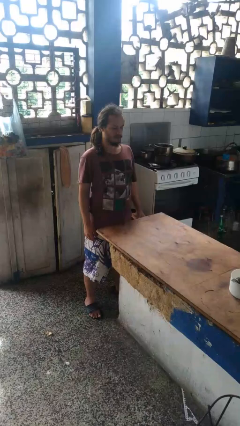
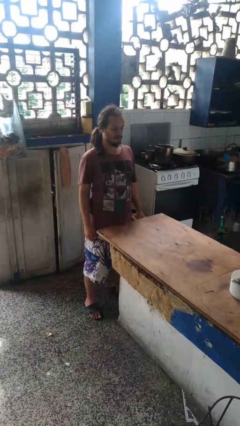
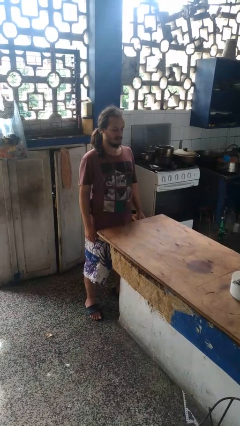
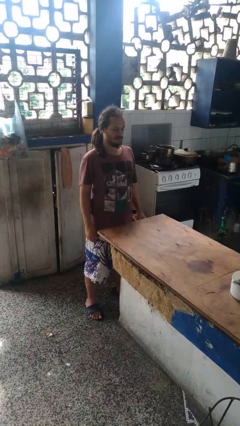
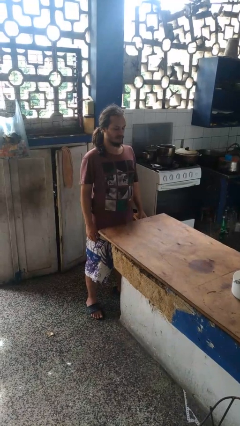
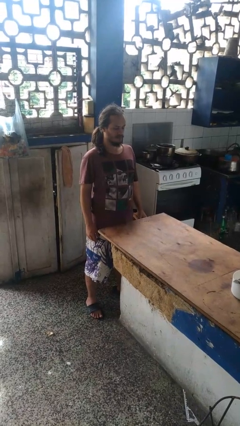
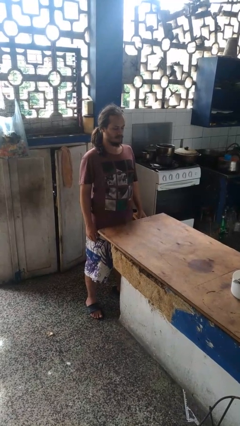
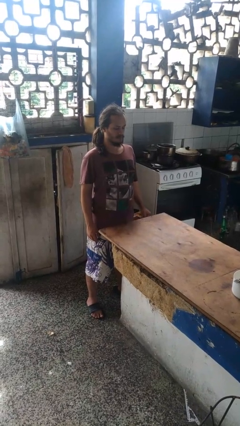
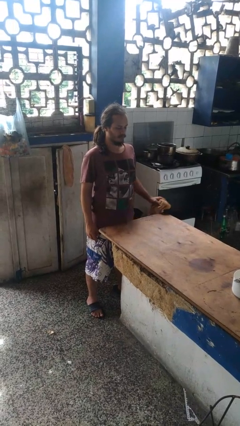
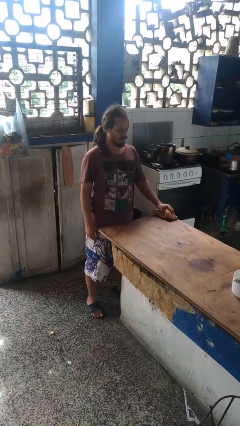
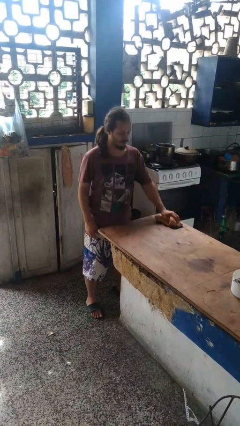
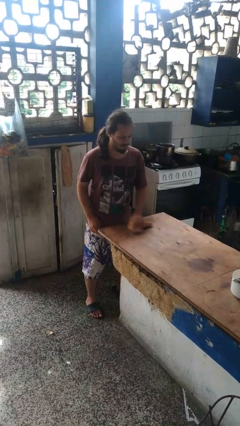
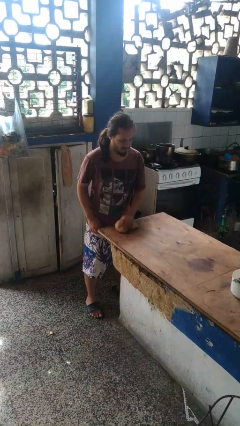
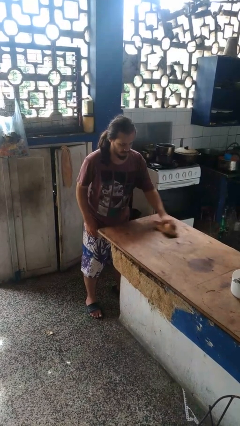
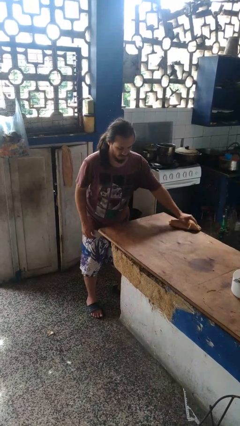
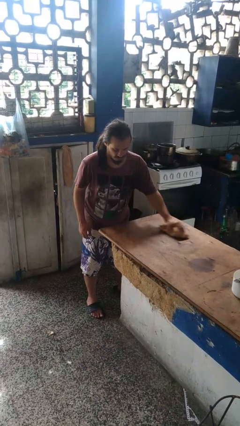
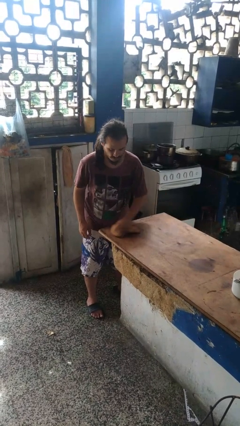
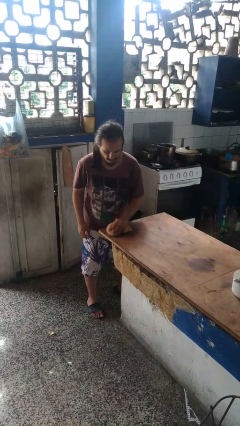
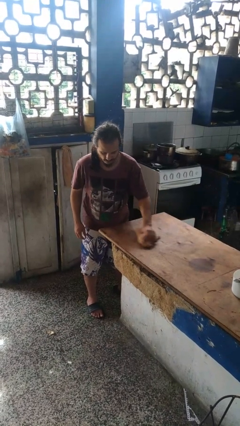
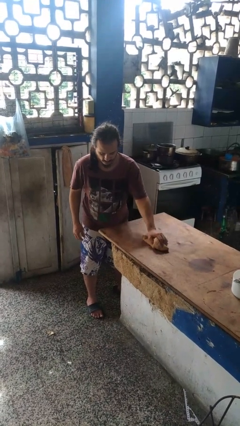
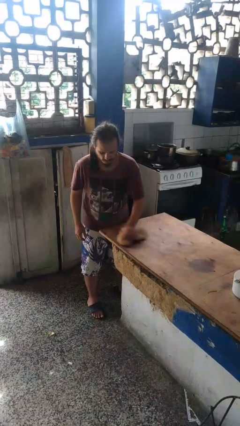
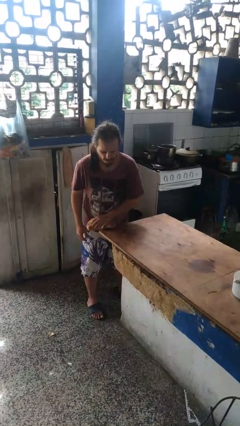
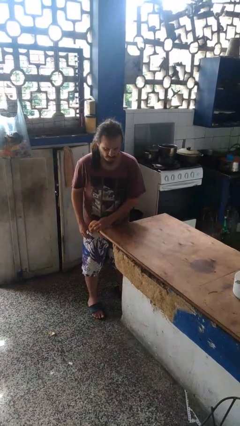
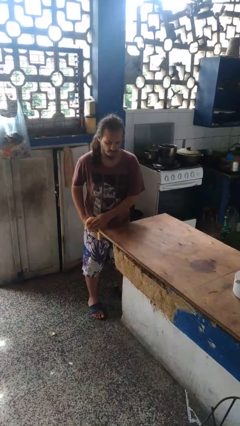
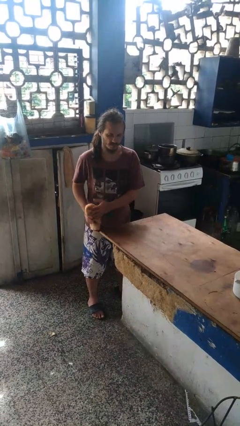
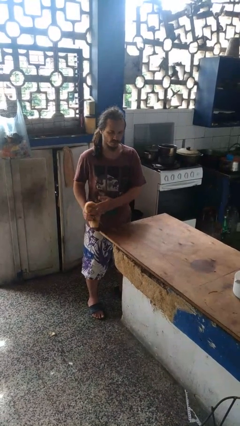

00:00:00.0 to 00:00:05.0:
person cleans table with rag

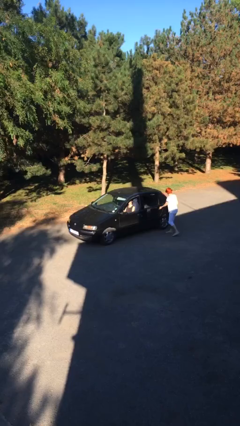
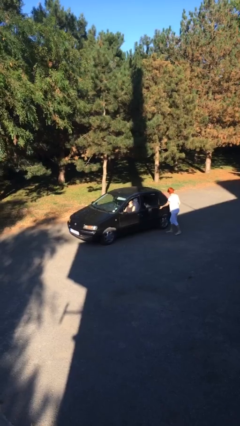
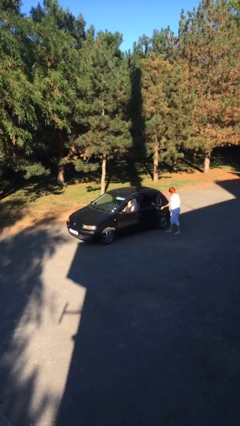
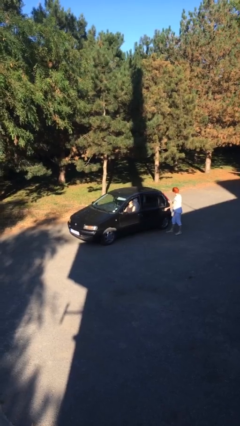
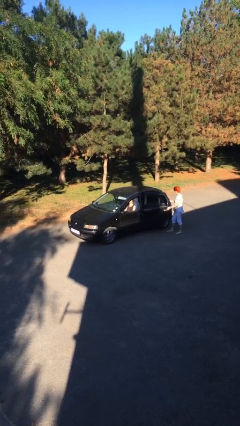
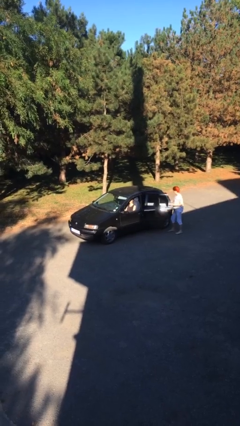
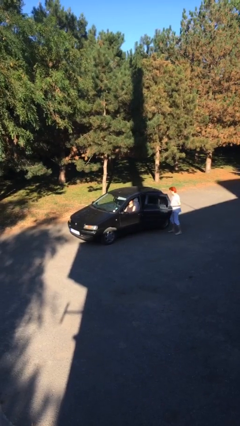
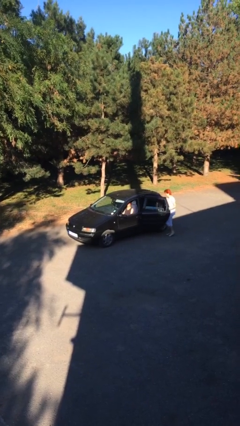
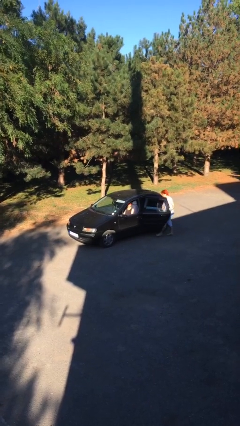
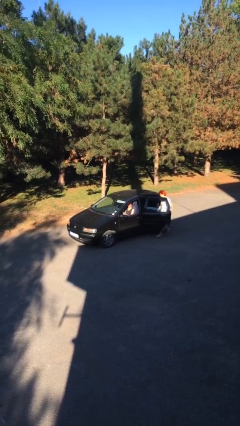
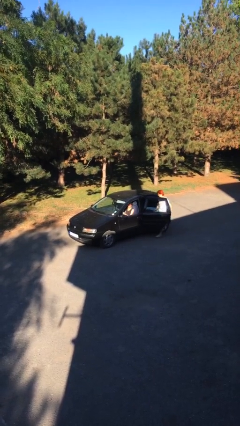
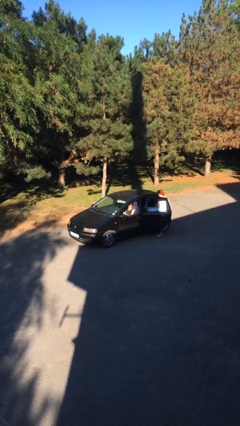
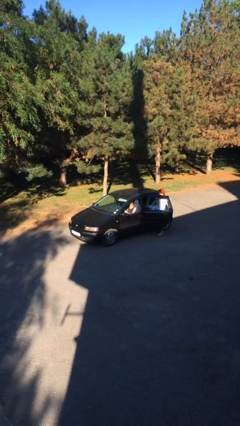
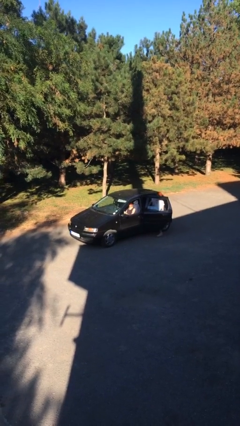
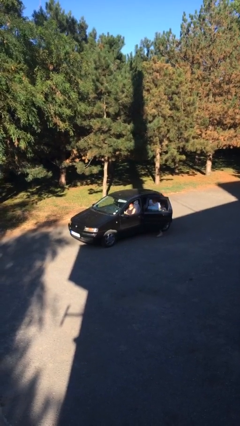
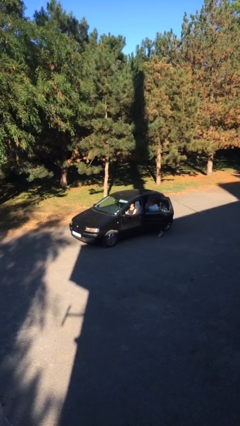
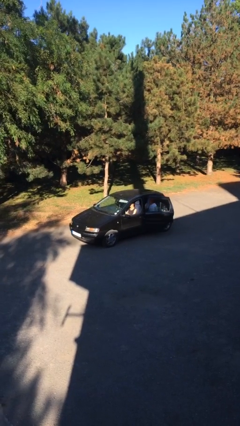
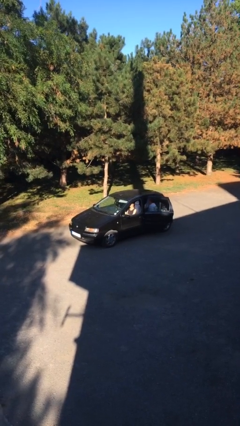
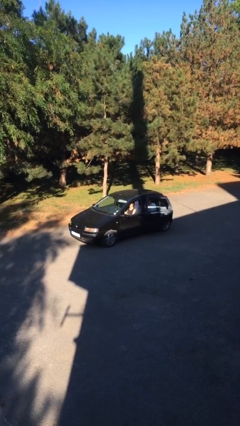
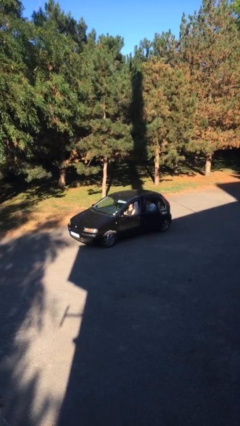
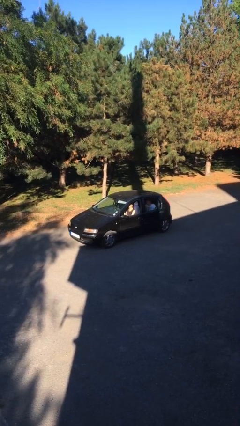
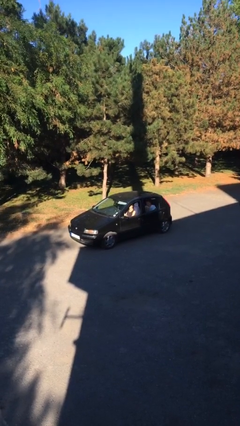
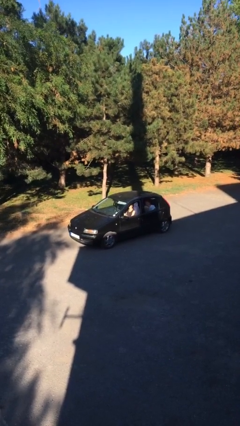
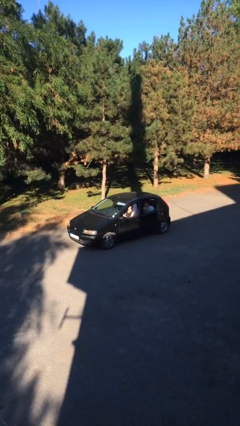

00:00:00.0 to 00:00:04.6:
car picks up person

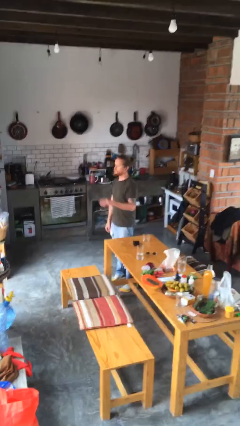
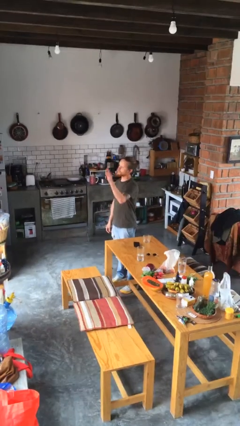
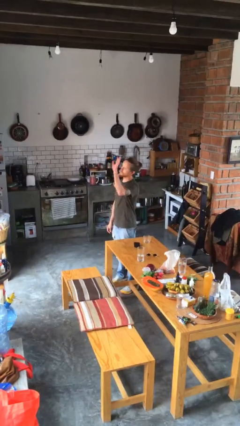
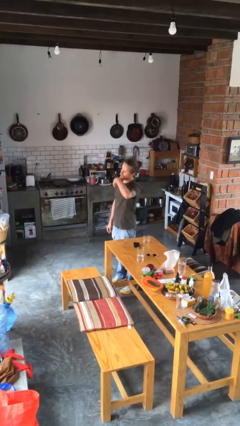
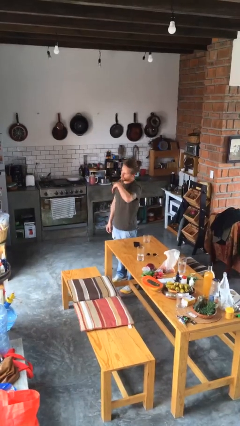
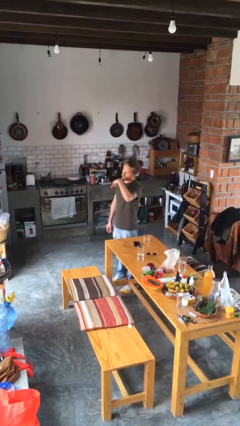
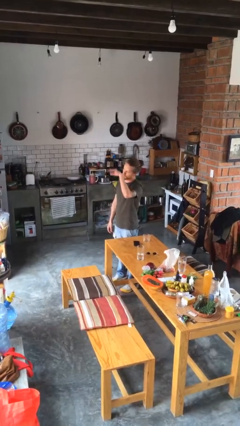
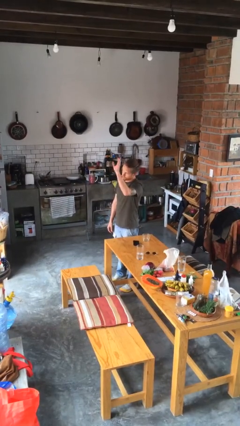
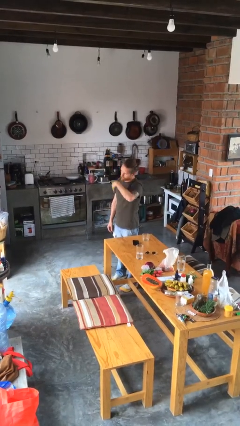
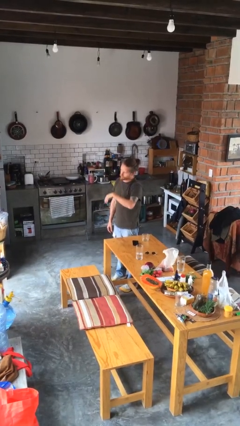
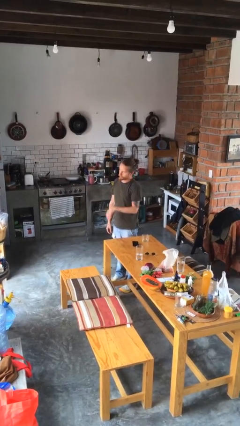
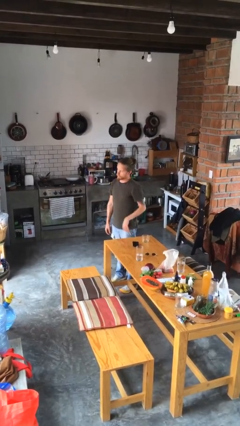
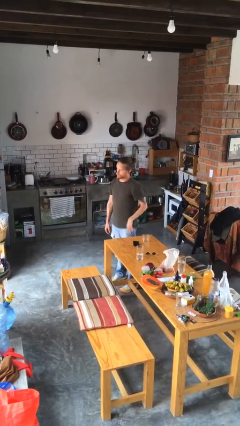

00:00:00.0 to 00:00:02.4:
person gestures come here

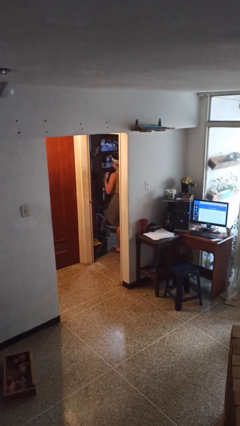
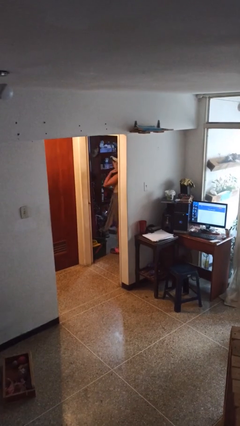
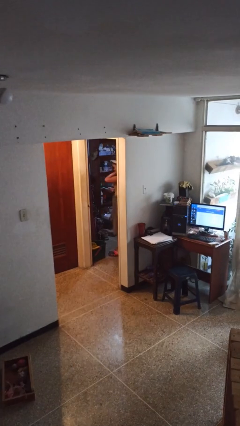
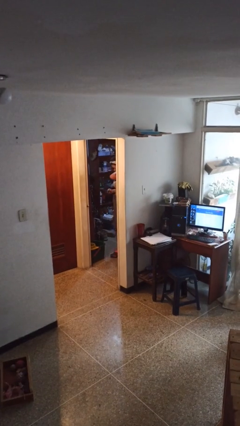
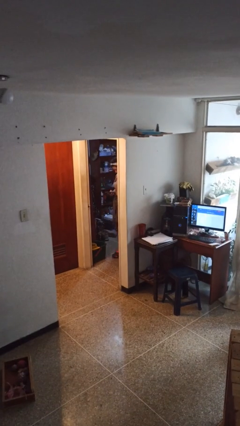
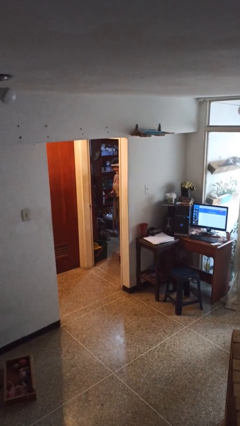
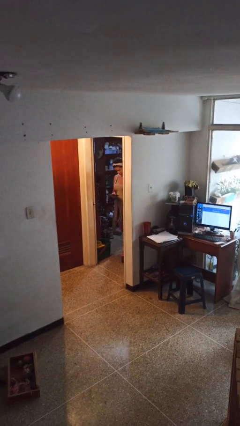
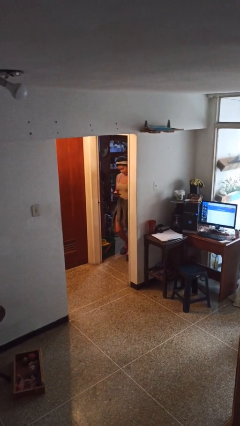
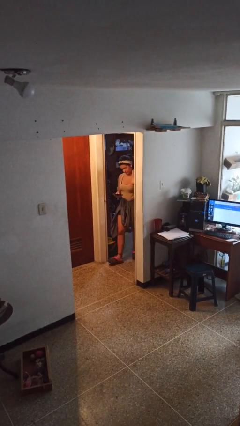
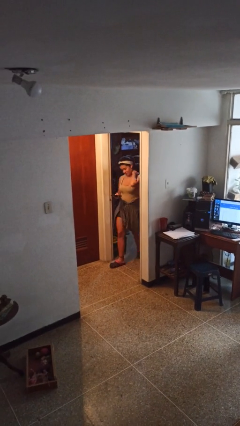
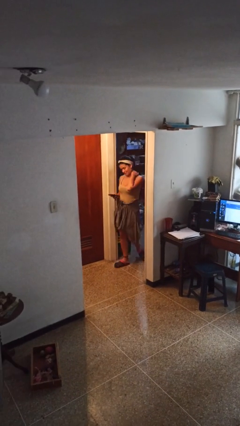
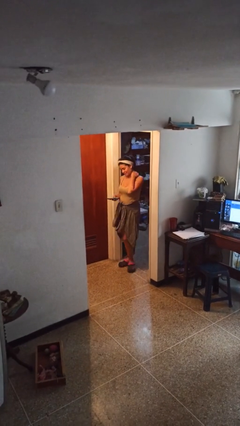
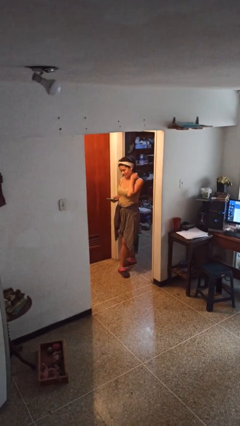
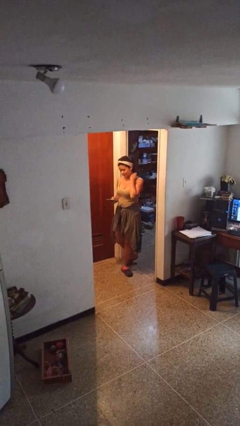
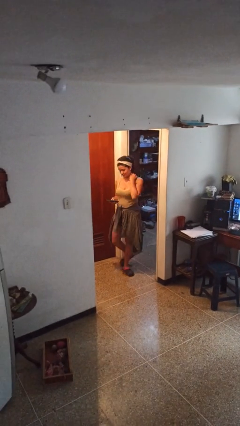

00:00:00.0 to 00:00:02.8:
person enters scene through structure

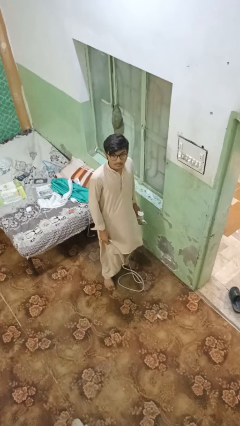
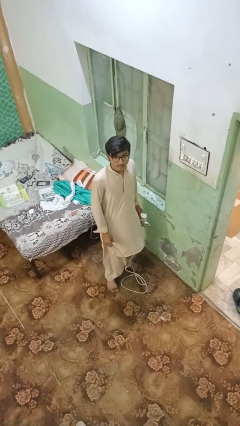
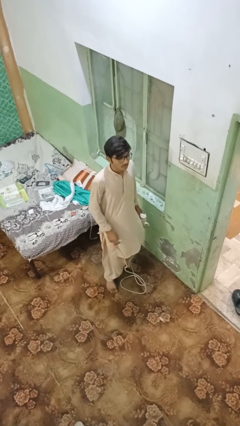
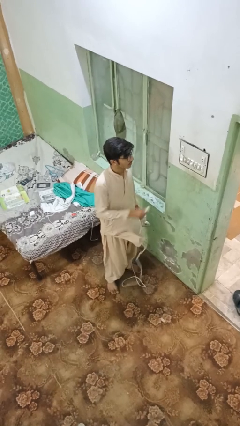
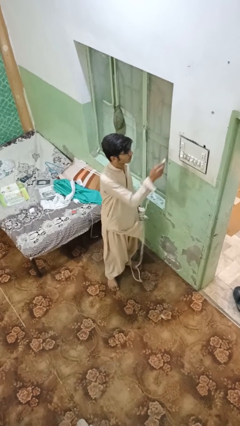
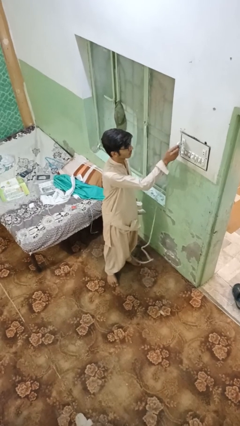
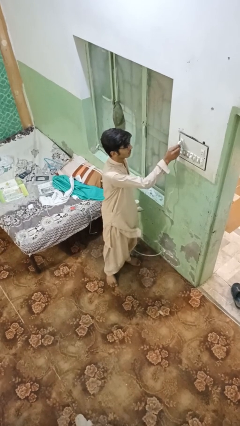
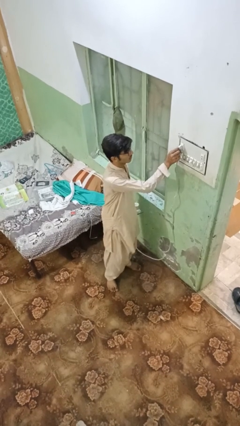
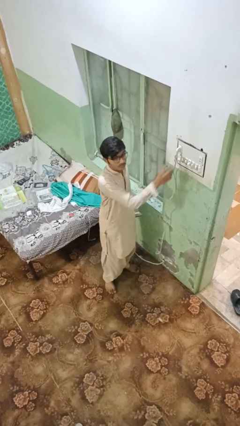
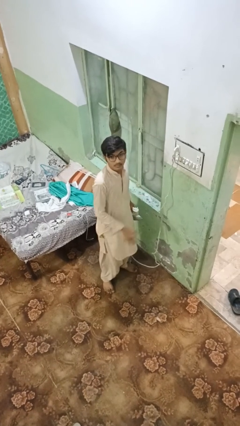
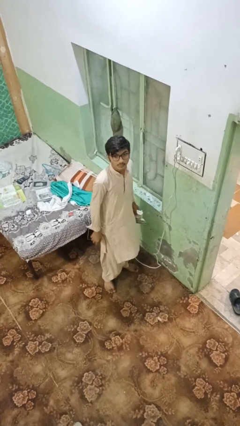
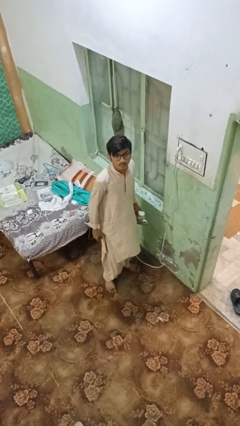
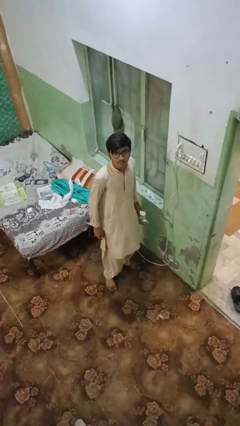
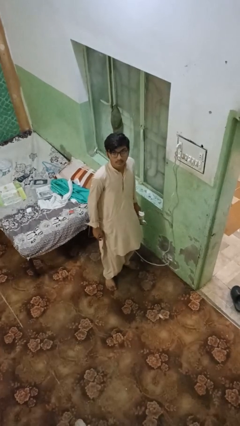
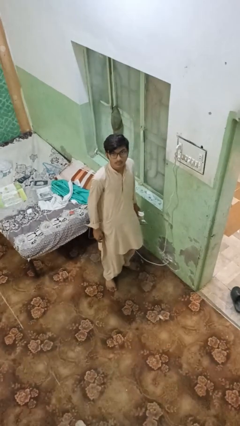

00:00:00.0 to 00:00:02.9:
person plugs into electrical socket
